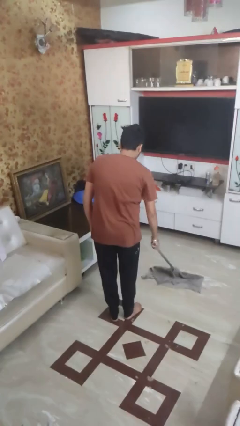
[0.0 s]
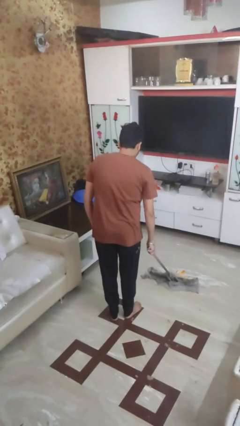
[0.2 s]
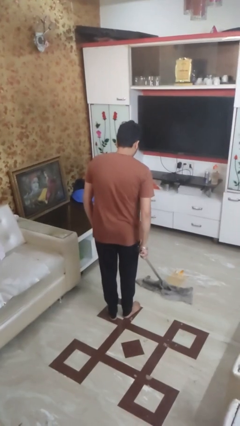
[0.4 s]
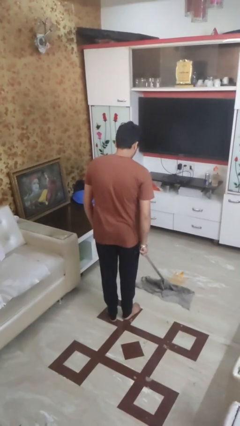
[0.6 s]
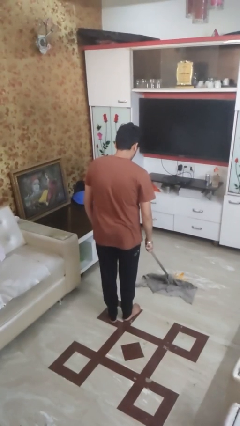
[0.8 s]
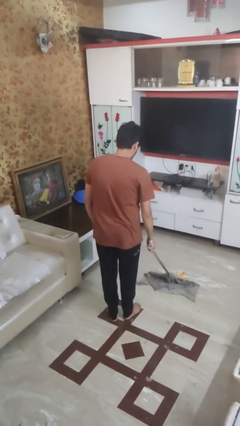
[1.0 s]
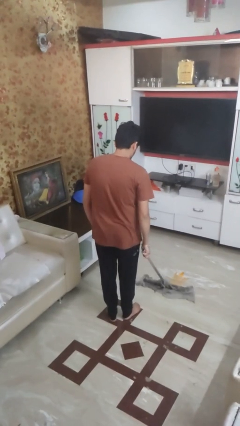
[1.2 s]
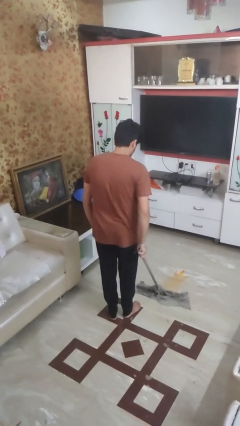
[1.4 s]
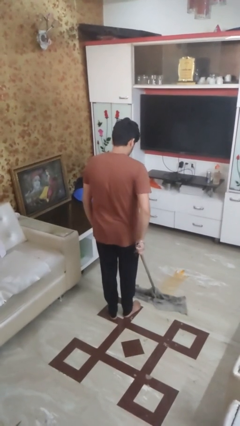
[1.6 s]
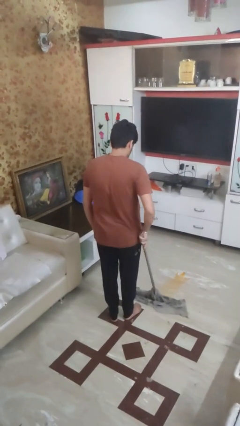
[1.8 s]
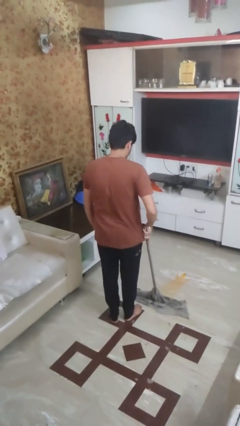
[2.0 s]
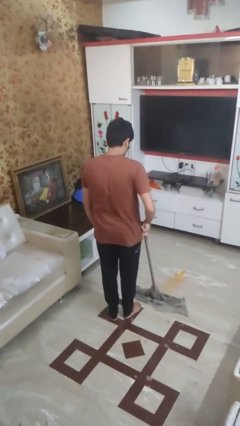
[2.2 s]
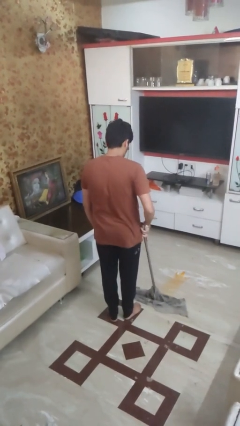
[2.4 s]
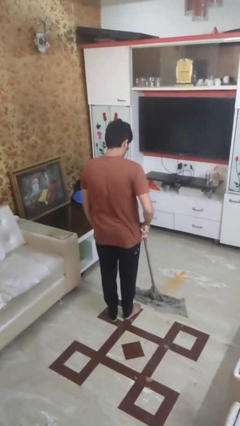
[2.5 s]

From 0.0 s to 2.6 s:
person mops

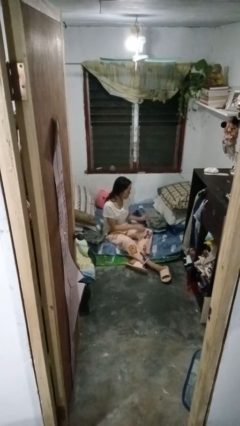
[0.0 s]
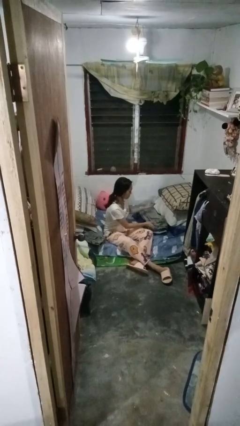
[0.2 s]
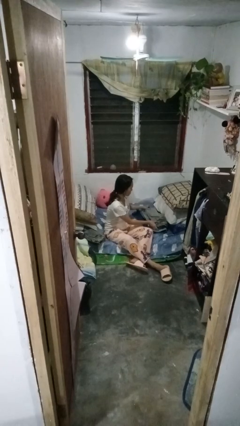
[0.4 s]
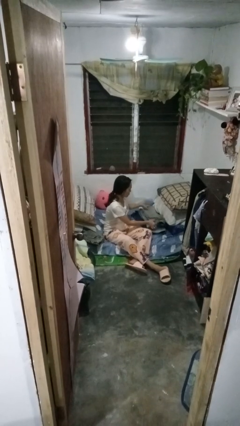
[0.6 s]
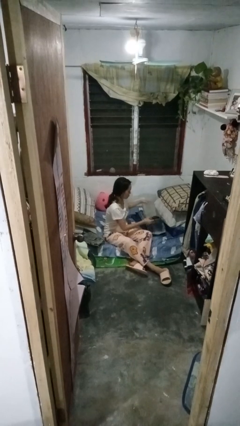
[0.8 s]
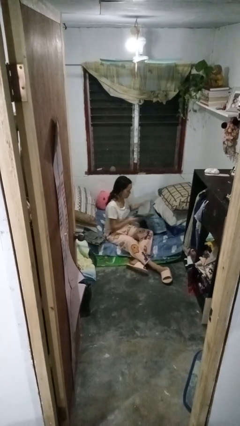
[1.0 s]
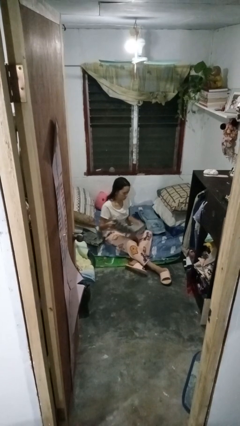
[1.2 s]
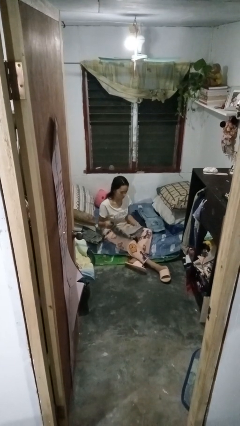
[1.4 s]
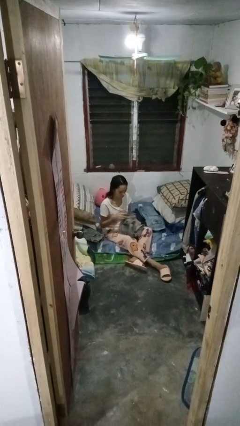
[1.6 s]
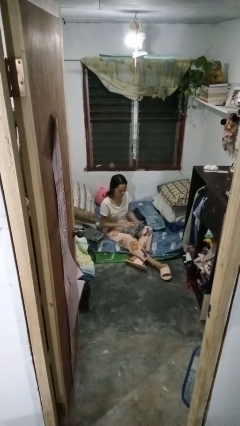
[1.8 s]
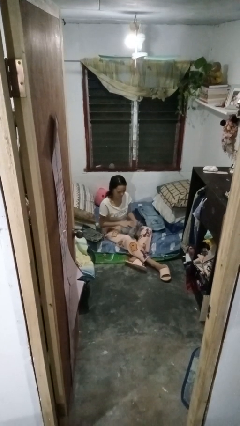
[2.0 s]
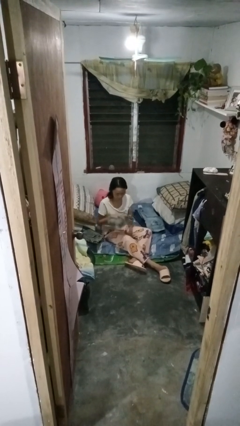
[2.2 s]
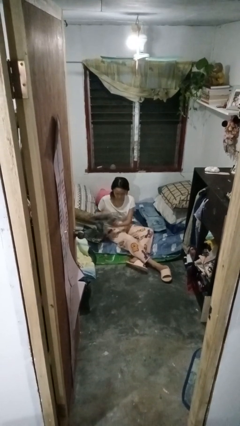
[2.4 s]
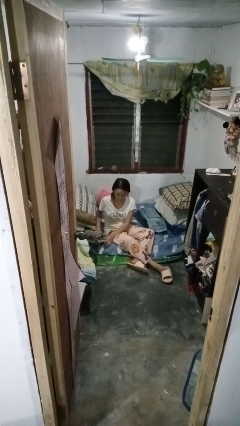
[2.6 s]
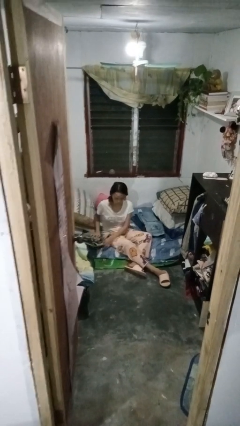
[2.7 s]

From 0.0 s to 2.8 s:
person folds pants

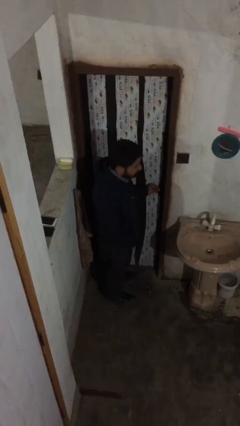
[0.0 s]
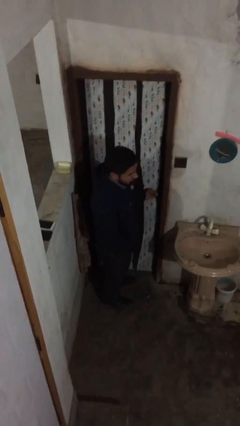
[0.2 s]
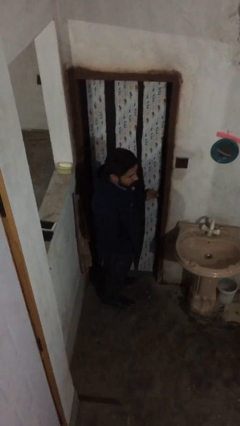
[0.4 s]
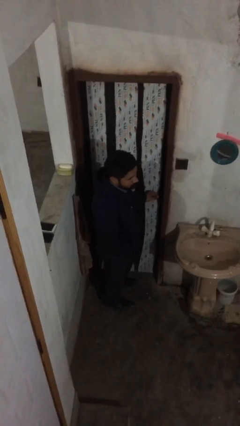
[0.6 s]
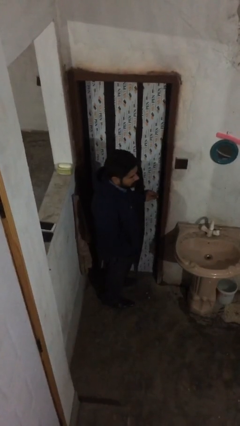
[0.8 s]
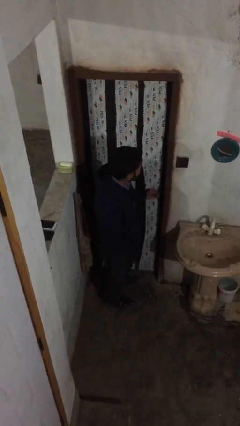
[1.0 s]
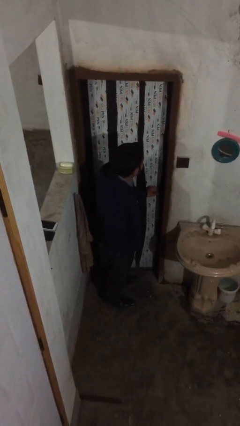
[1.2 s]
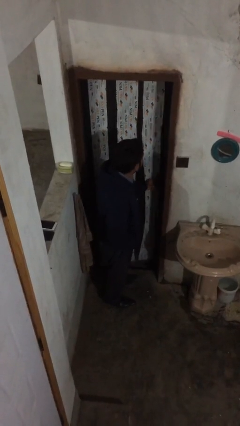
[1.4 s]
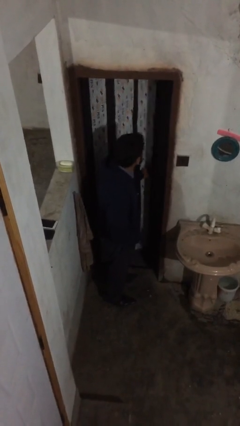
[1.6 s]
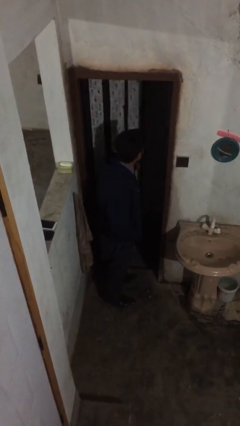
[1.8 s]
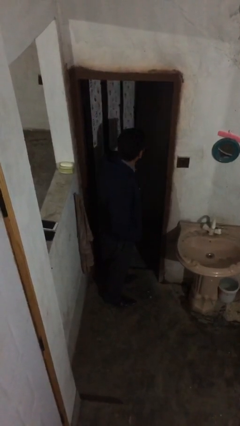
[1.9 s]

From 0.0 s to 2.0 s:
person opens facility door

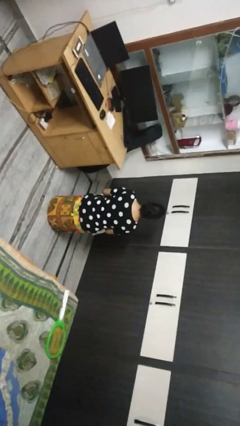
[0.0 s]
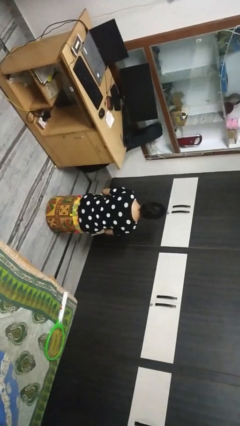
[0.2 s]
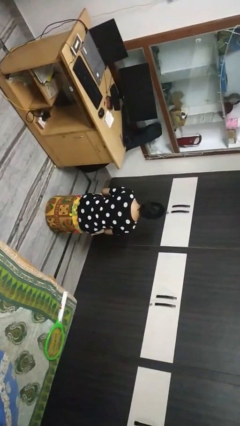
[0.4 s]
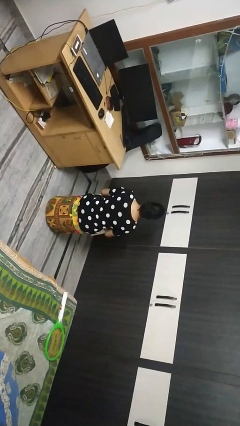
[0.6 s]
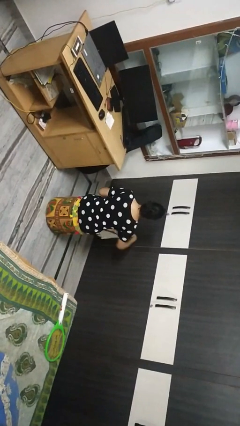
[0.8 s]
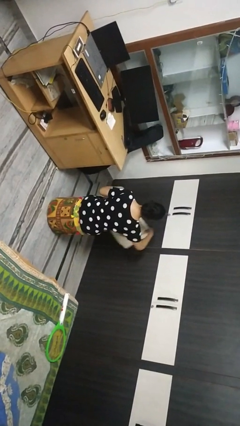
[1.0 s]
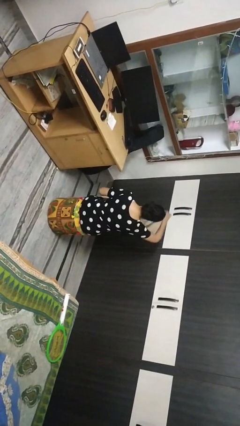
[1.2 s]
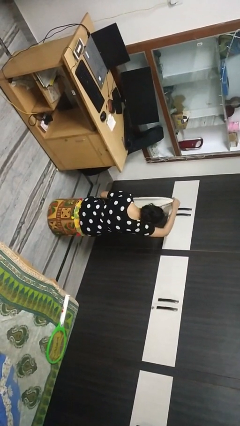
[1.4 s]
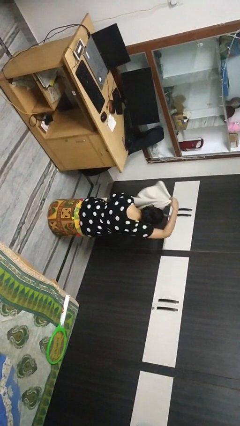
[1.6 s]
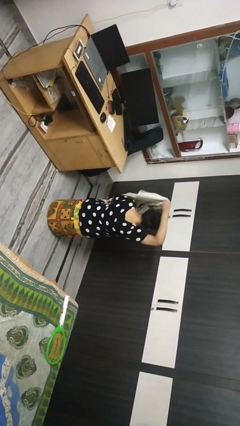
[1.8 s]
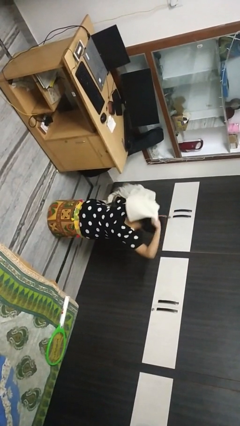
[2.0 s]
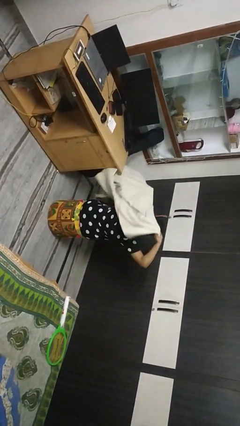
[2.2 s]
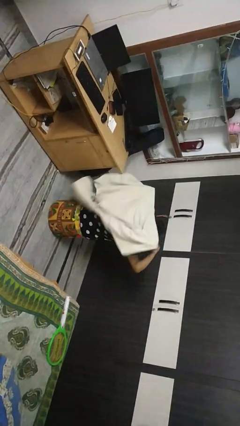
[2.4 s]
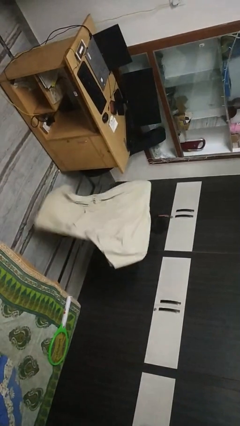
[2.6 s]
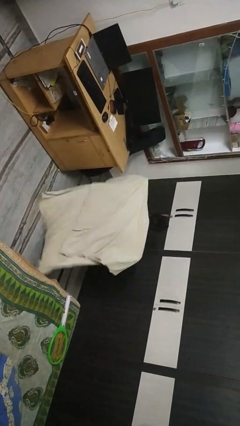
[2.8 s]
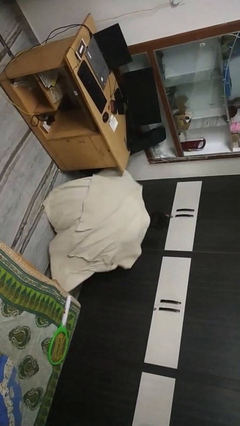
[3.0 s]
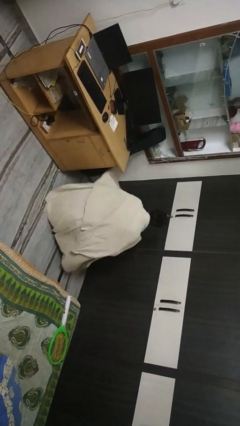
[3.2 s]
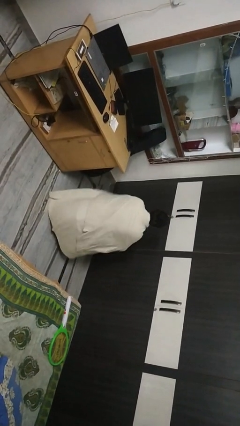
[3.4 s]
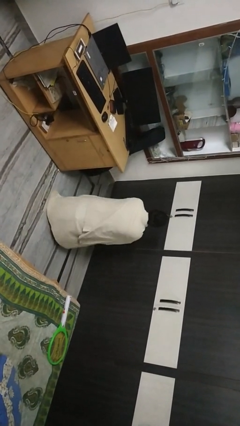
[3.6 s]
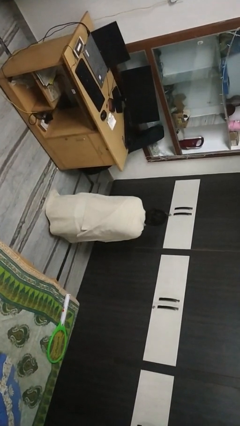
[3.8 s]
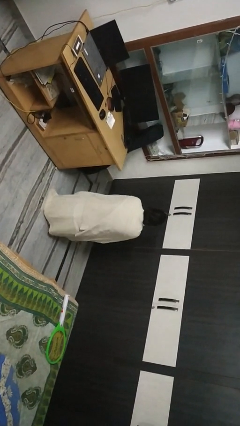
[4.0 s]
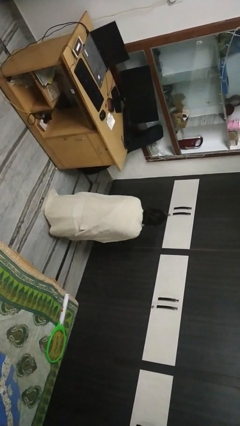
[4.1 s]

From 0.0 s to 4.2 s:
person covers with blanket

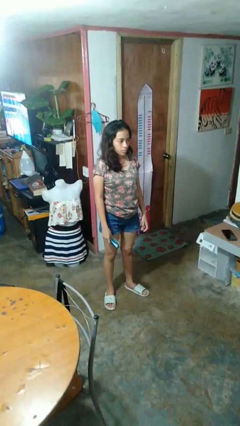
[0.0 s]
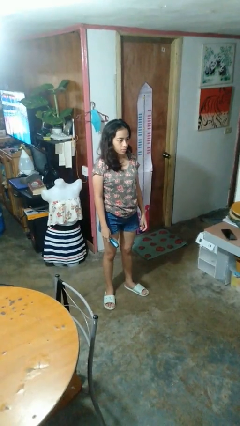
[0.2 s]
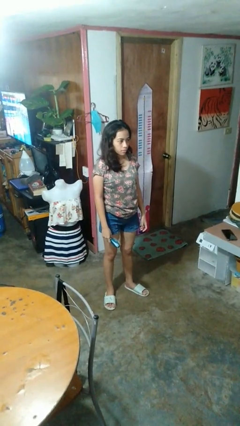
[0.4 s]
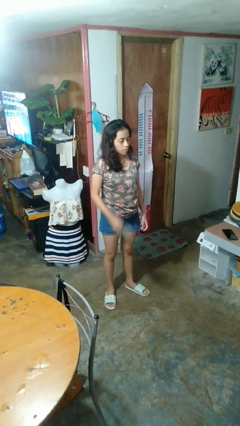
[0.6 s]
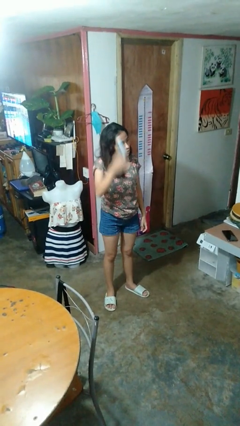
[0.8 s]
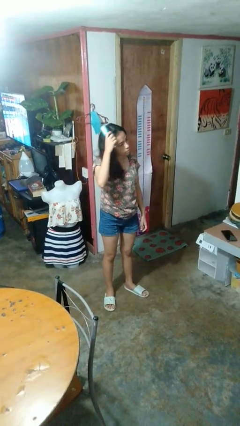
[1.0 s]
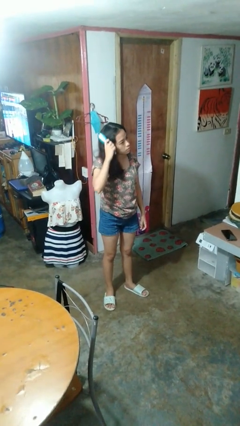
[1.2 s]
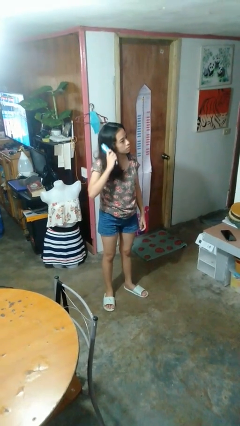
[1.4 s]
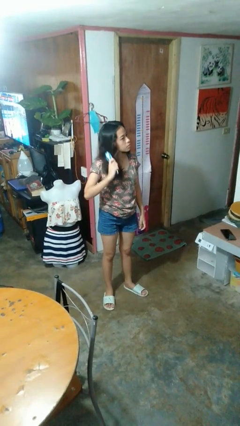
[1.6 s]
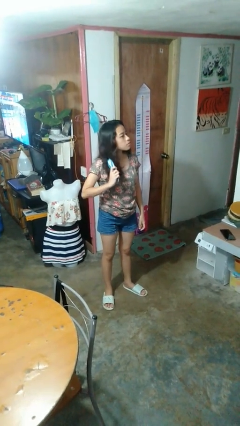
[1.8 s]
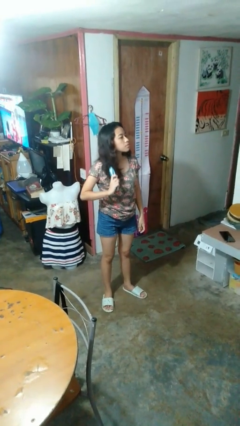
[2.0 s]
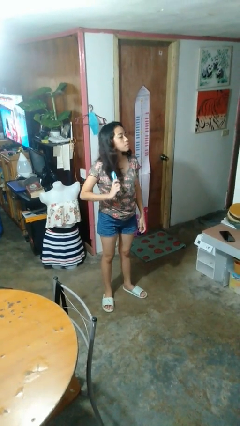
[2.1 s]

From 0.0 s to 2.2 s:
person brushes hair

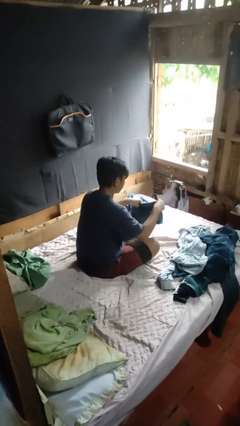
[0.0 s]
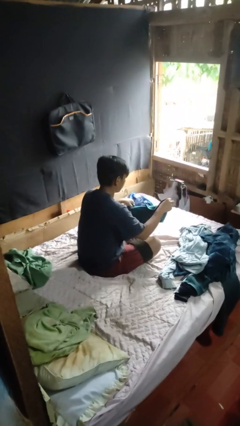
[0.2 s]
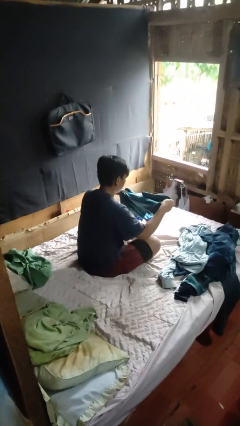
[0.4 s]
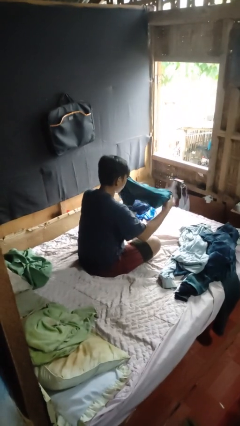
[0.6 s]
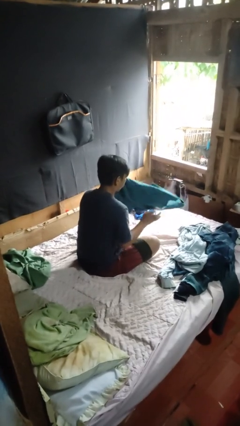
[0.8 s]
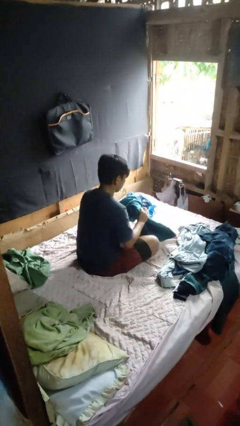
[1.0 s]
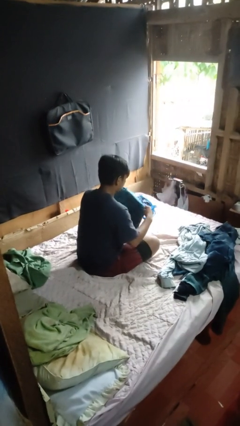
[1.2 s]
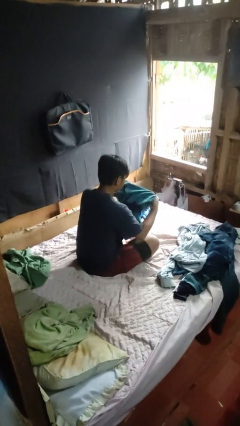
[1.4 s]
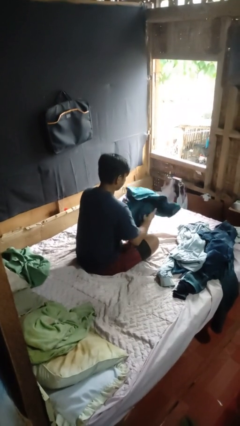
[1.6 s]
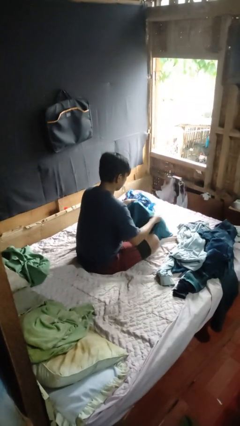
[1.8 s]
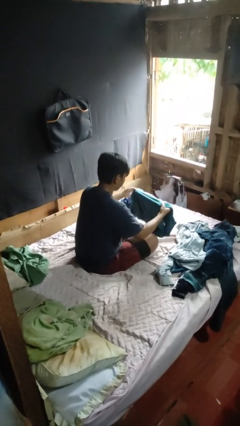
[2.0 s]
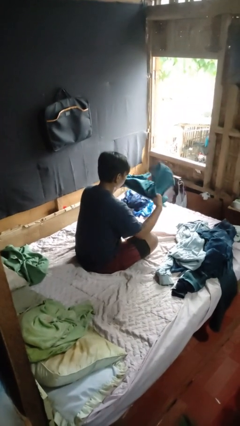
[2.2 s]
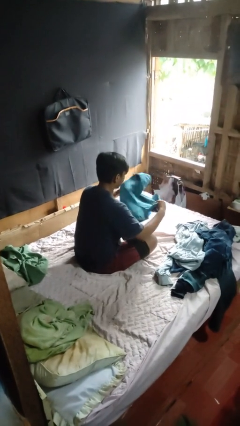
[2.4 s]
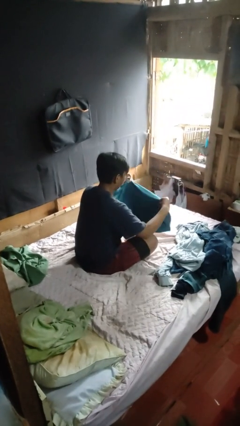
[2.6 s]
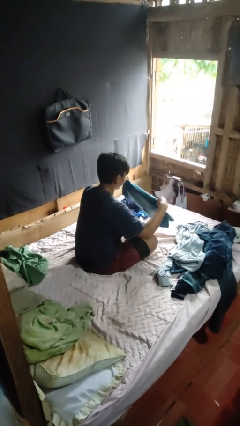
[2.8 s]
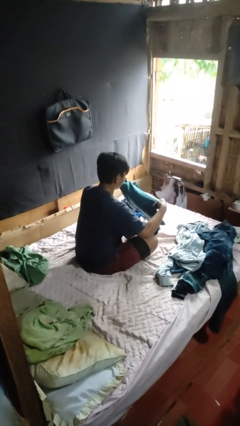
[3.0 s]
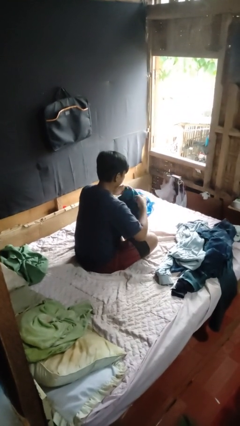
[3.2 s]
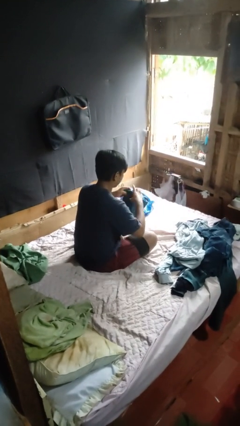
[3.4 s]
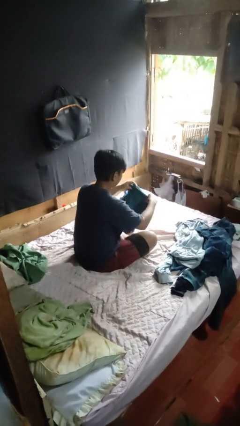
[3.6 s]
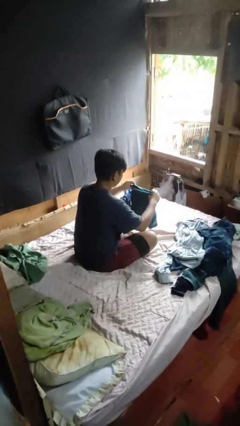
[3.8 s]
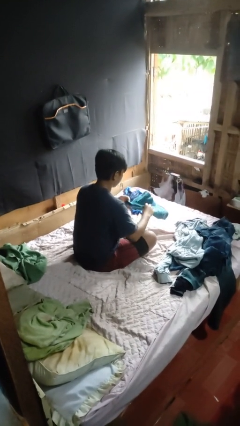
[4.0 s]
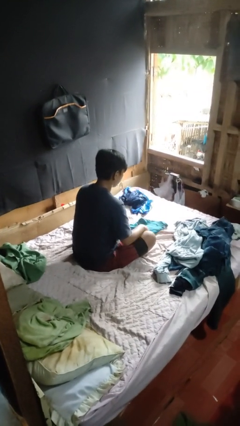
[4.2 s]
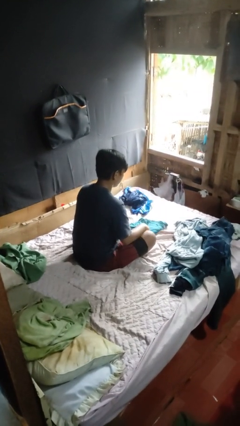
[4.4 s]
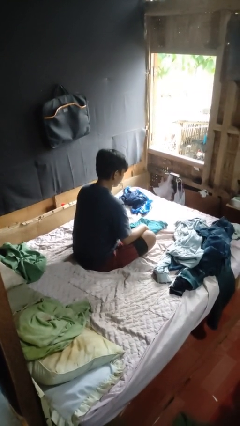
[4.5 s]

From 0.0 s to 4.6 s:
person folds shirt
